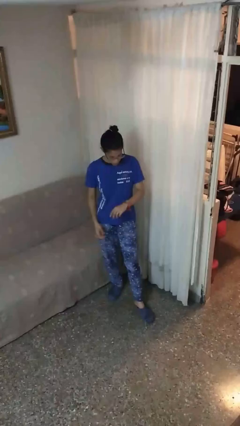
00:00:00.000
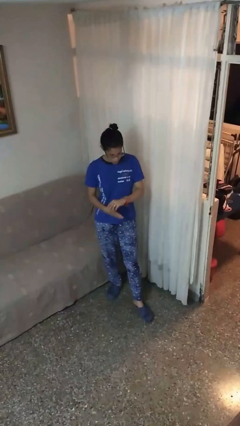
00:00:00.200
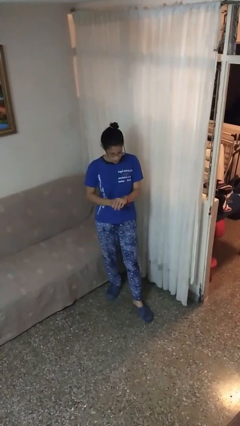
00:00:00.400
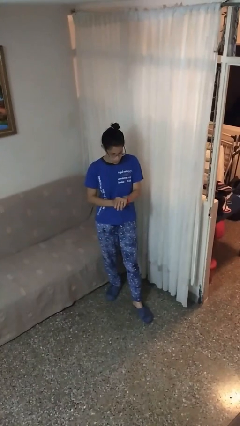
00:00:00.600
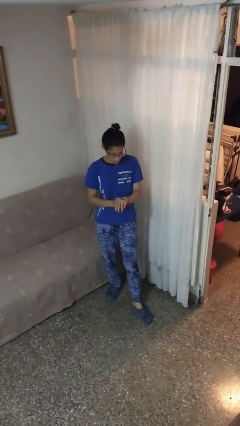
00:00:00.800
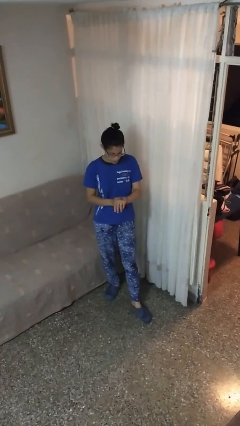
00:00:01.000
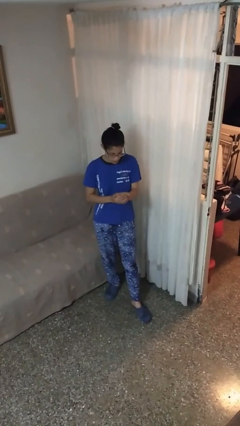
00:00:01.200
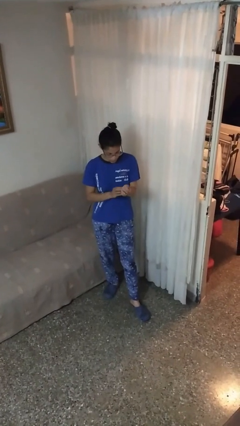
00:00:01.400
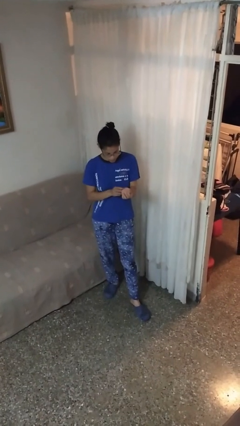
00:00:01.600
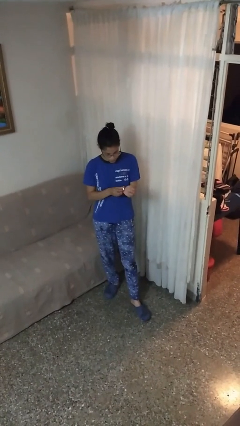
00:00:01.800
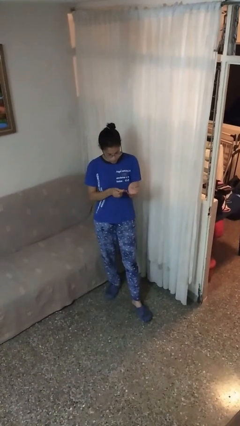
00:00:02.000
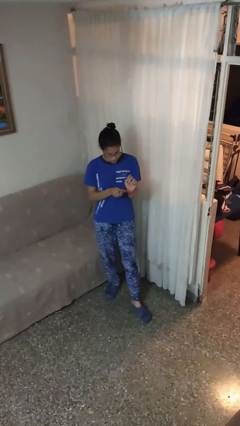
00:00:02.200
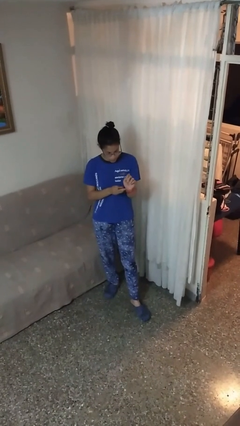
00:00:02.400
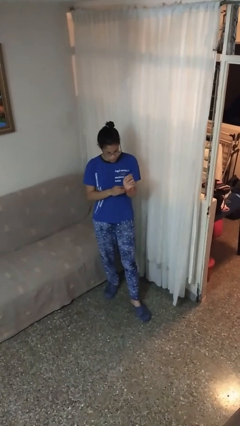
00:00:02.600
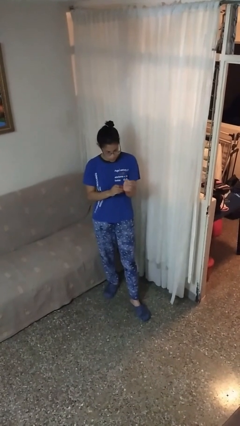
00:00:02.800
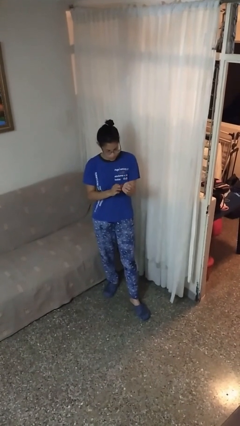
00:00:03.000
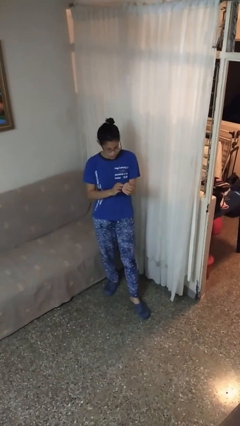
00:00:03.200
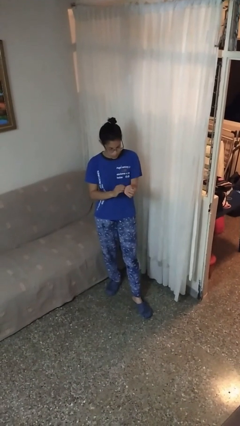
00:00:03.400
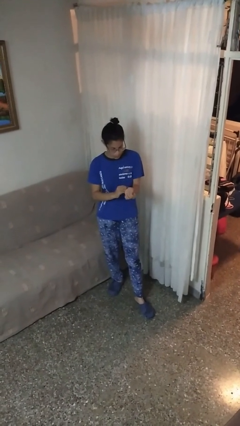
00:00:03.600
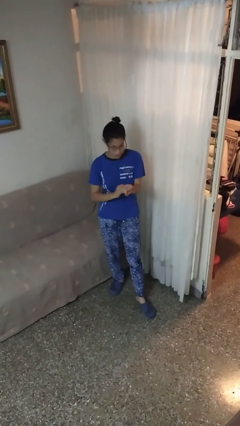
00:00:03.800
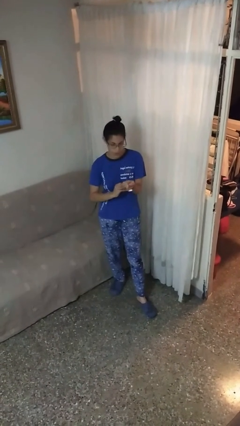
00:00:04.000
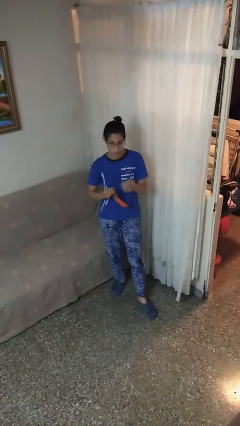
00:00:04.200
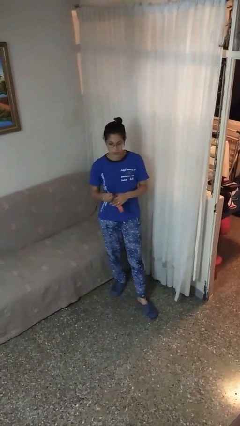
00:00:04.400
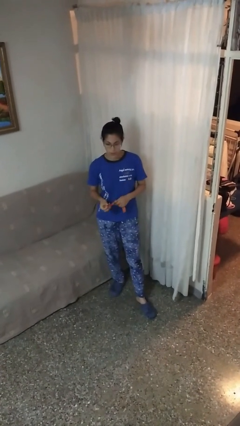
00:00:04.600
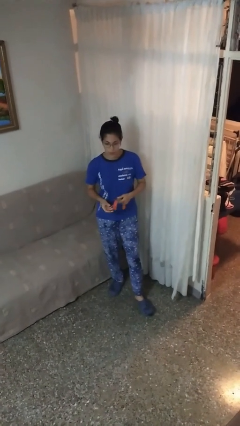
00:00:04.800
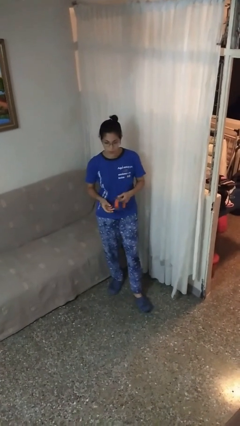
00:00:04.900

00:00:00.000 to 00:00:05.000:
person takes off wristwatch

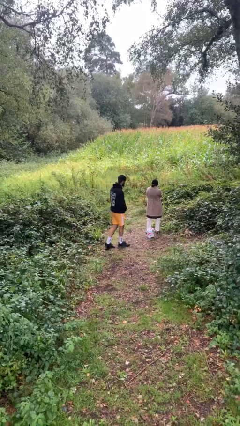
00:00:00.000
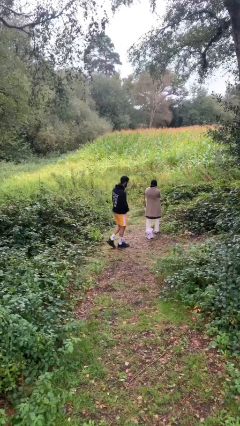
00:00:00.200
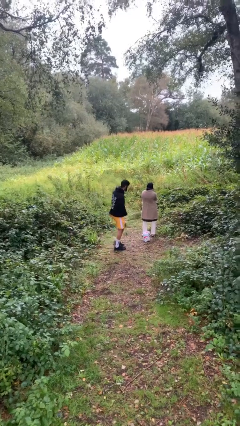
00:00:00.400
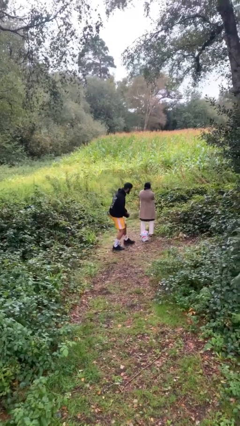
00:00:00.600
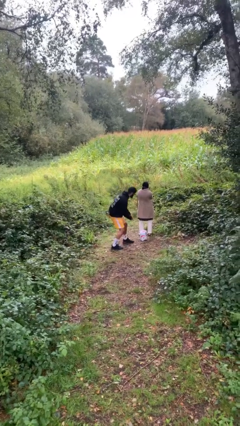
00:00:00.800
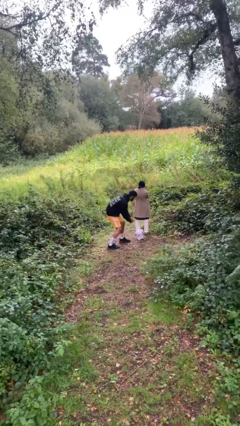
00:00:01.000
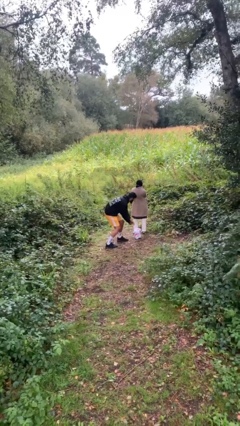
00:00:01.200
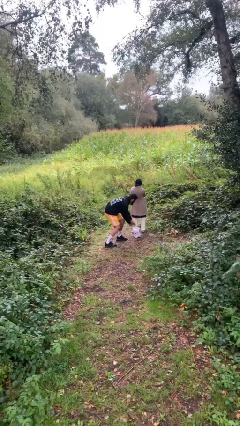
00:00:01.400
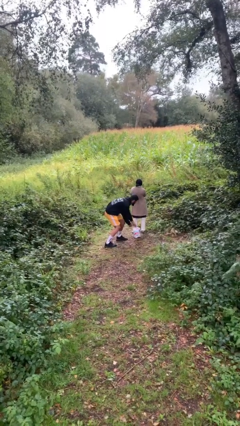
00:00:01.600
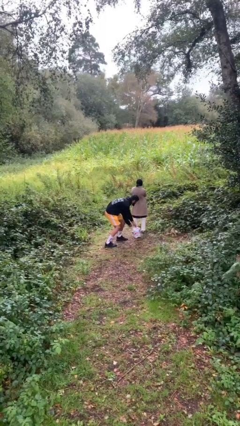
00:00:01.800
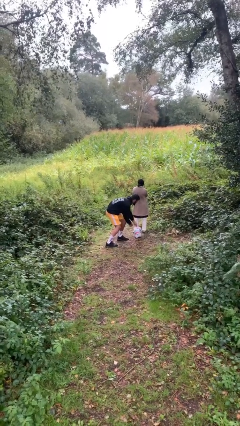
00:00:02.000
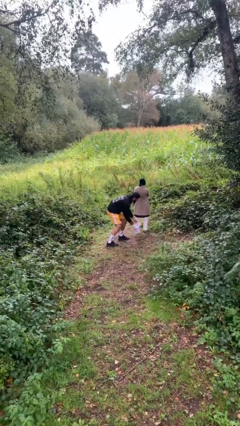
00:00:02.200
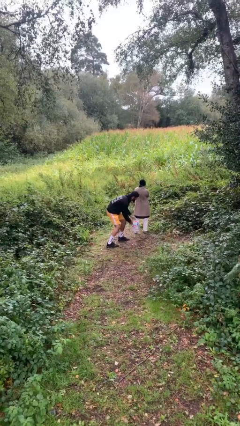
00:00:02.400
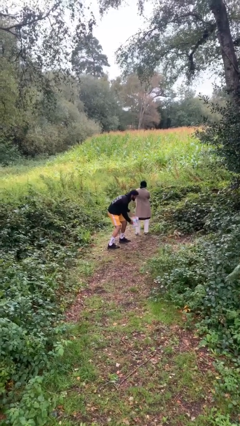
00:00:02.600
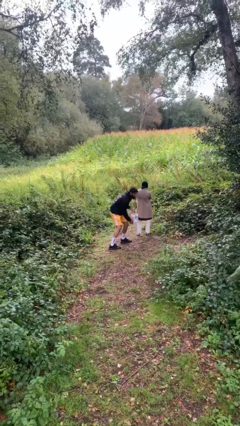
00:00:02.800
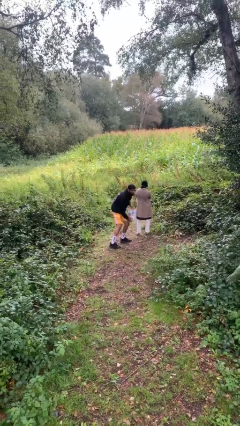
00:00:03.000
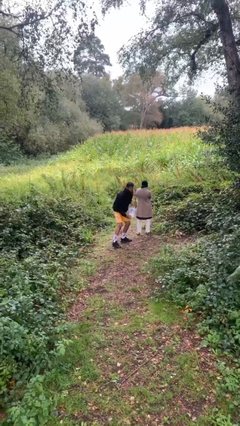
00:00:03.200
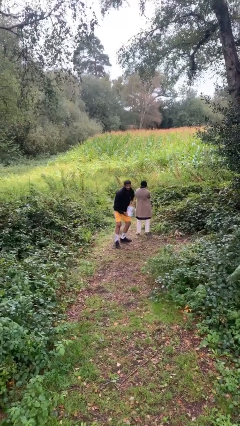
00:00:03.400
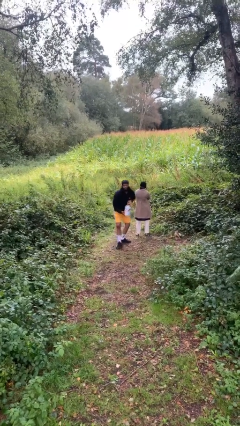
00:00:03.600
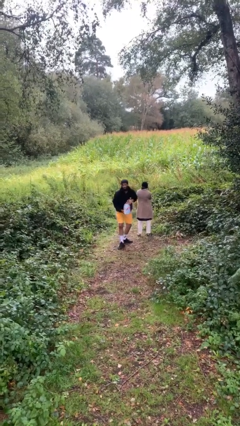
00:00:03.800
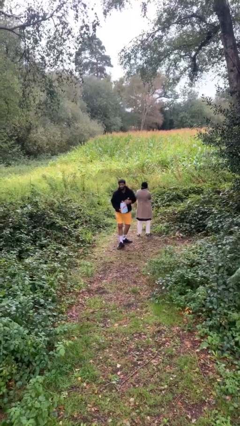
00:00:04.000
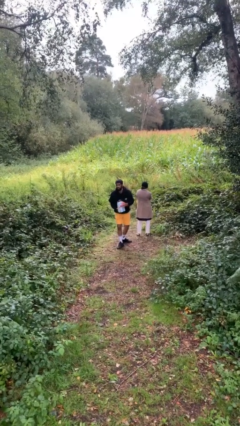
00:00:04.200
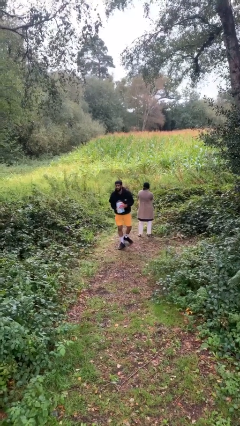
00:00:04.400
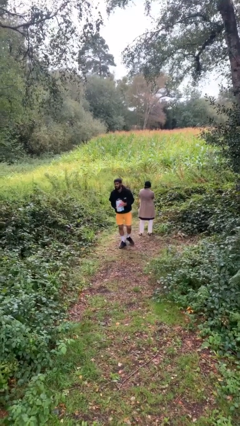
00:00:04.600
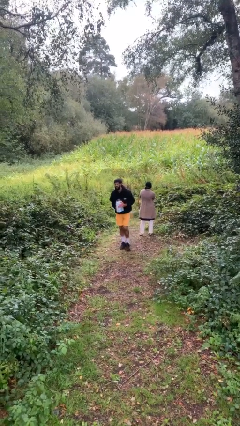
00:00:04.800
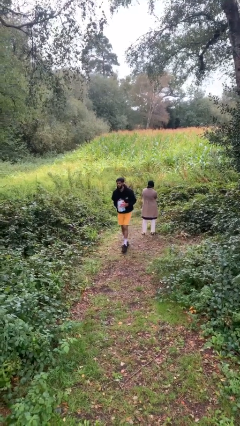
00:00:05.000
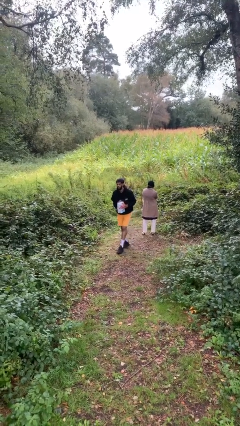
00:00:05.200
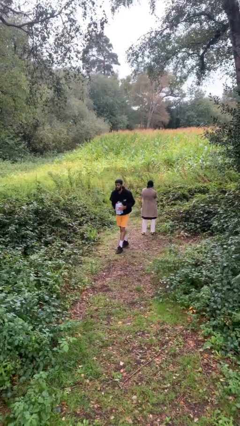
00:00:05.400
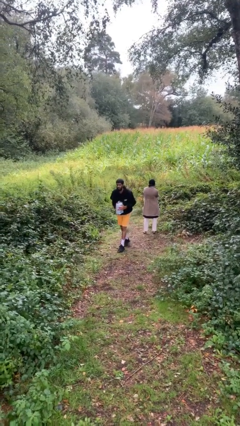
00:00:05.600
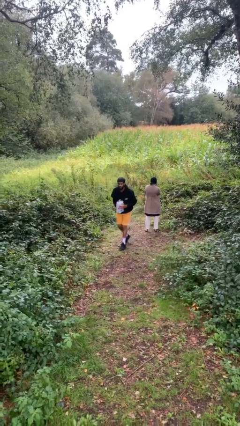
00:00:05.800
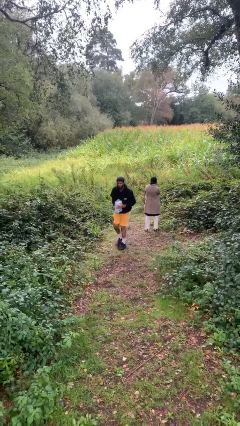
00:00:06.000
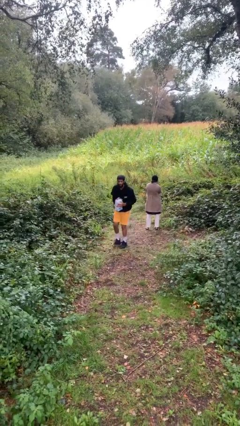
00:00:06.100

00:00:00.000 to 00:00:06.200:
person steals object from person

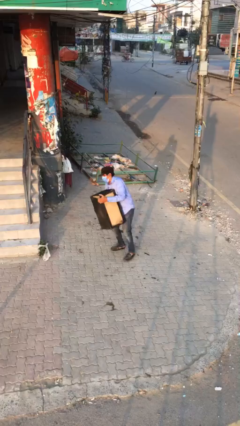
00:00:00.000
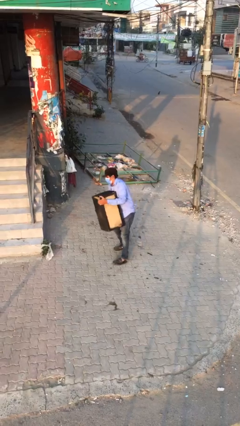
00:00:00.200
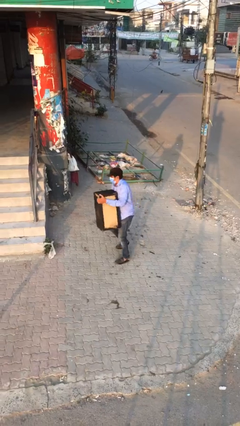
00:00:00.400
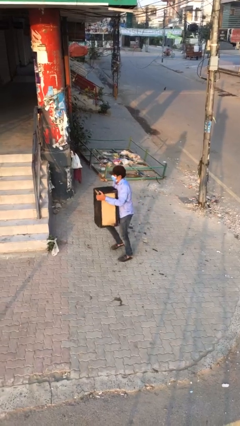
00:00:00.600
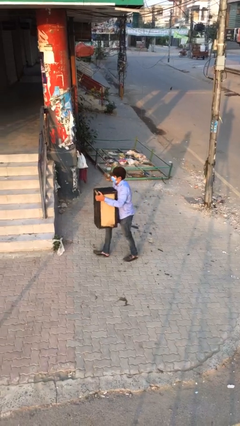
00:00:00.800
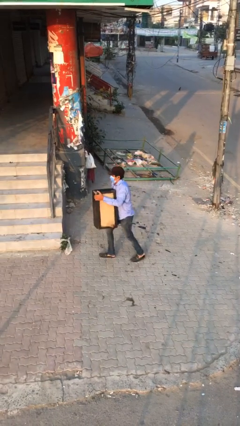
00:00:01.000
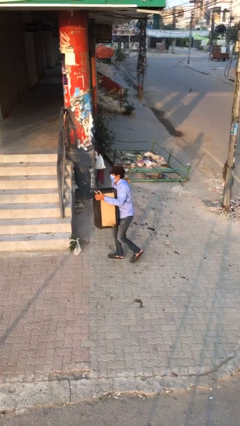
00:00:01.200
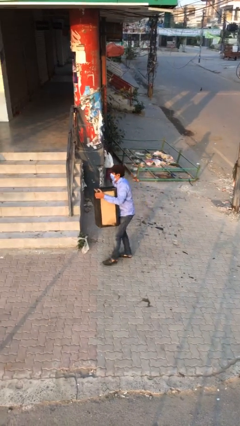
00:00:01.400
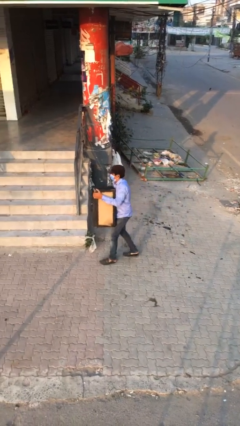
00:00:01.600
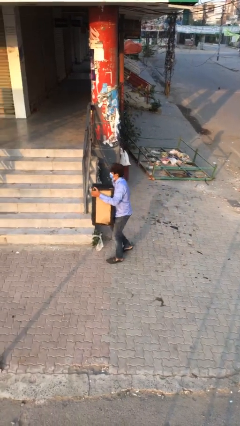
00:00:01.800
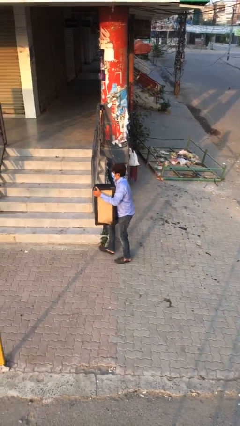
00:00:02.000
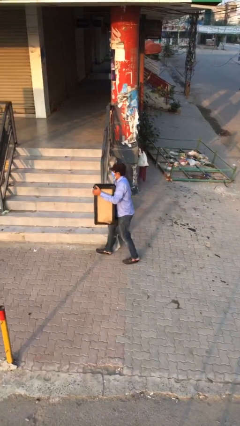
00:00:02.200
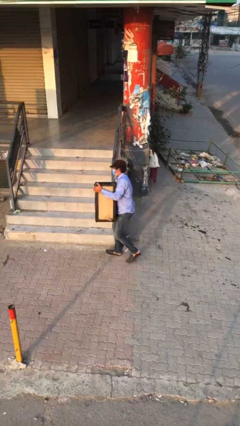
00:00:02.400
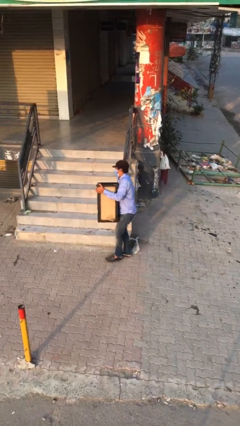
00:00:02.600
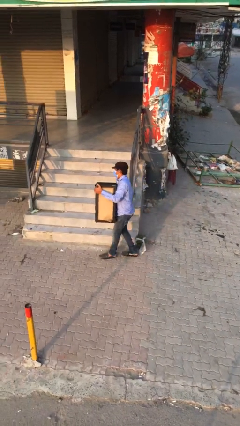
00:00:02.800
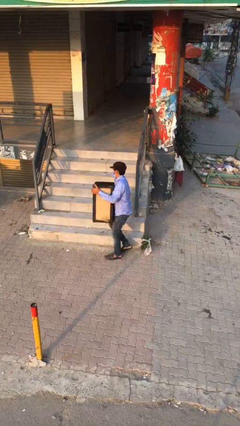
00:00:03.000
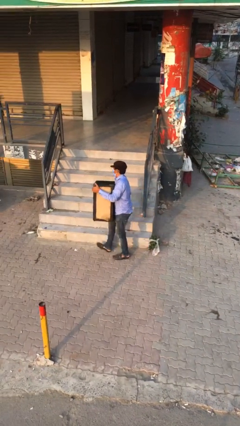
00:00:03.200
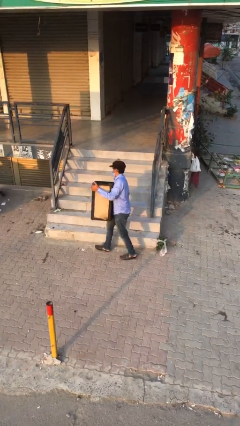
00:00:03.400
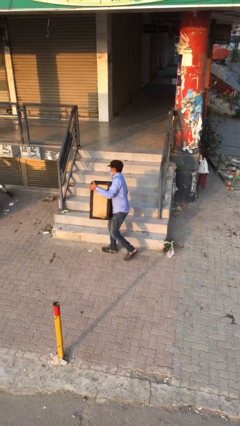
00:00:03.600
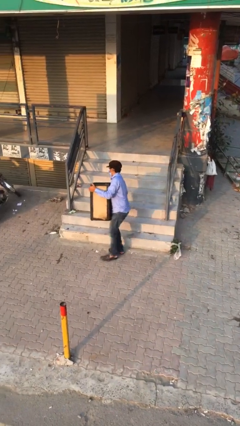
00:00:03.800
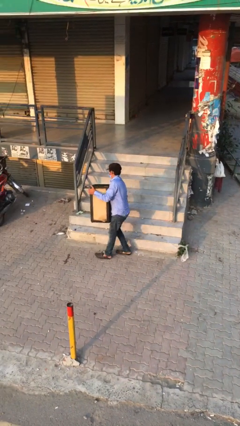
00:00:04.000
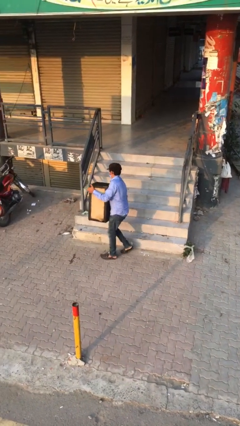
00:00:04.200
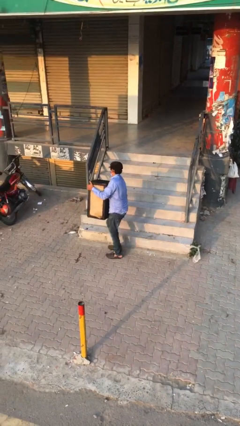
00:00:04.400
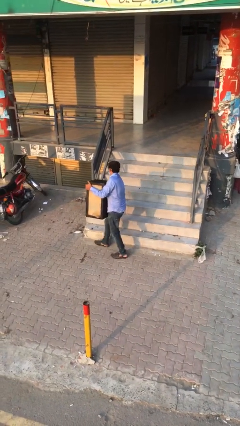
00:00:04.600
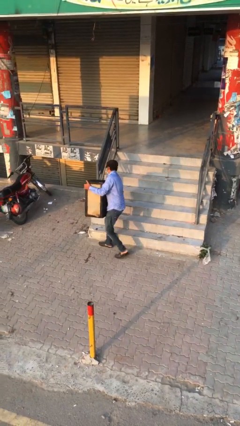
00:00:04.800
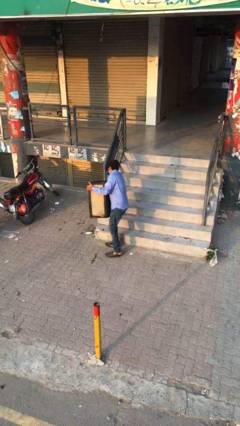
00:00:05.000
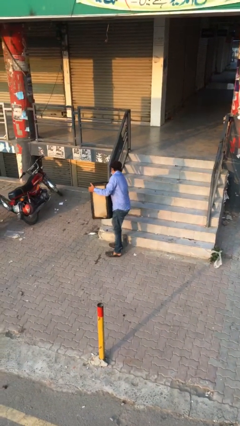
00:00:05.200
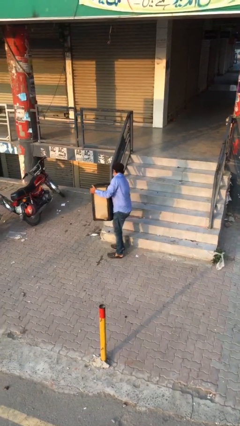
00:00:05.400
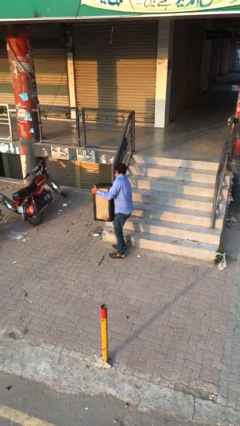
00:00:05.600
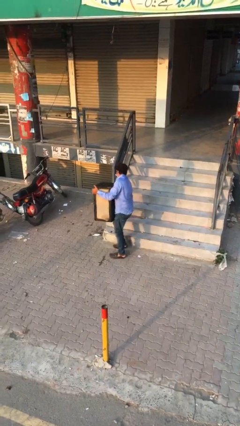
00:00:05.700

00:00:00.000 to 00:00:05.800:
person carries heavy object

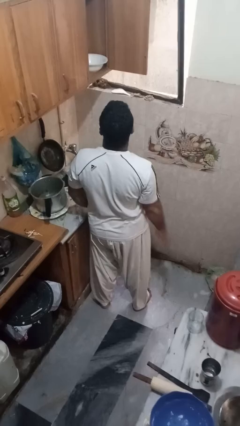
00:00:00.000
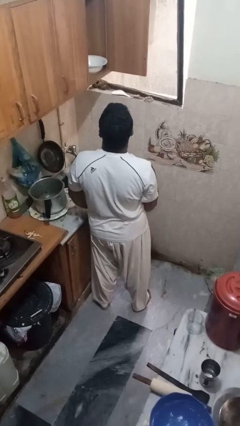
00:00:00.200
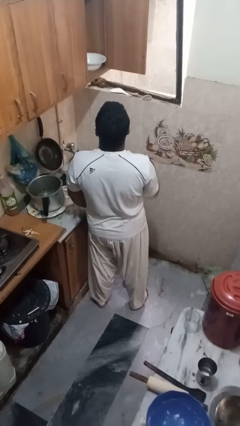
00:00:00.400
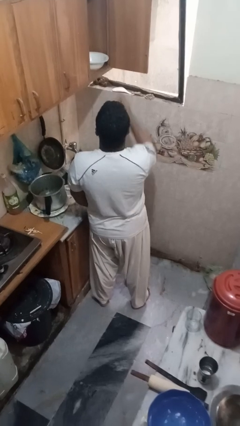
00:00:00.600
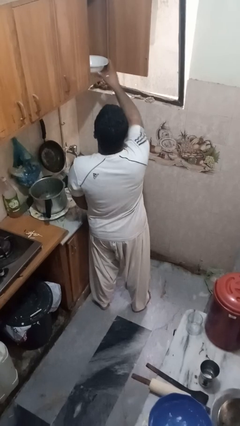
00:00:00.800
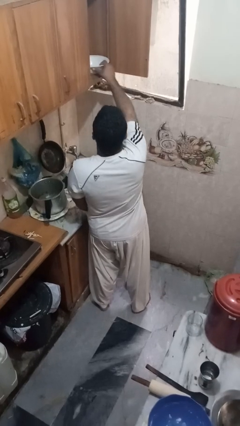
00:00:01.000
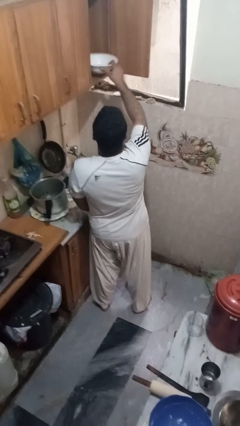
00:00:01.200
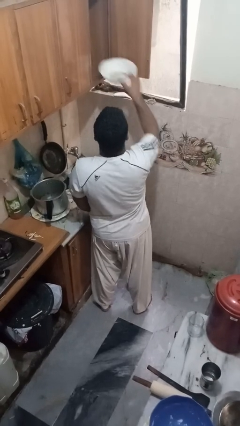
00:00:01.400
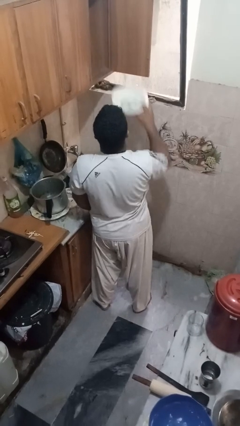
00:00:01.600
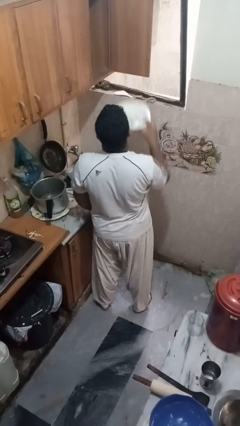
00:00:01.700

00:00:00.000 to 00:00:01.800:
person takes object from cabinet
